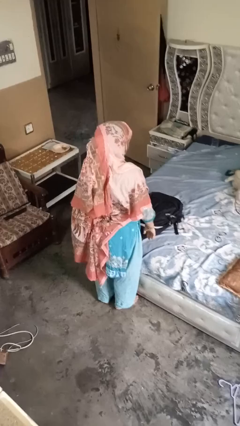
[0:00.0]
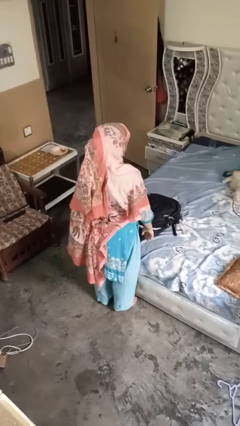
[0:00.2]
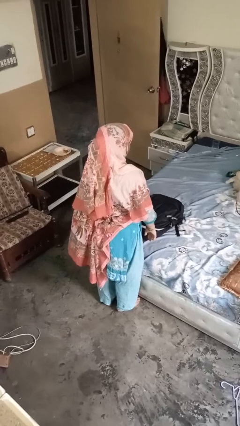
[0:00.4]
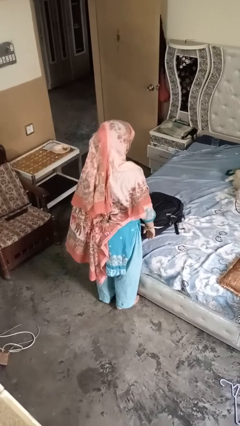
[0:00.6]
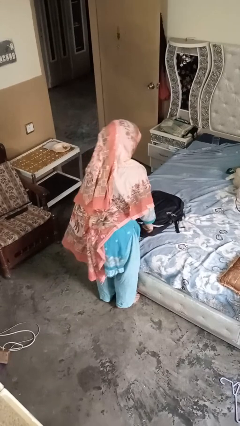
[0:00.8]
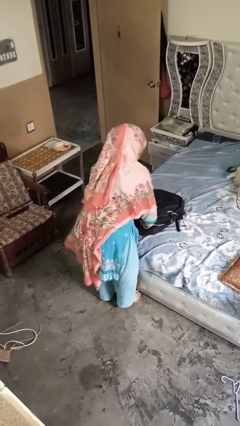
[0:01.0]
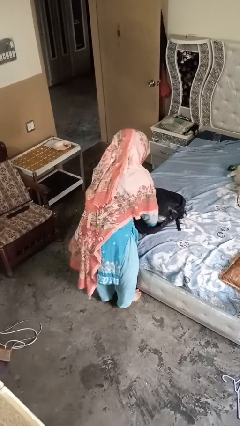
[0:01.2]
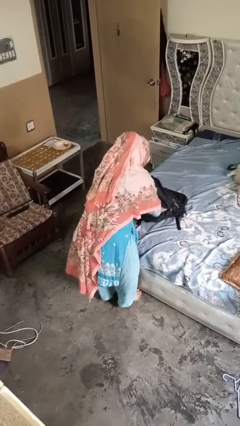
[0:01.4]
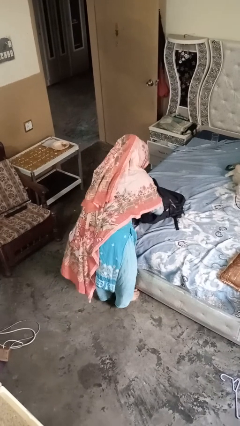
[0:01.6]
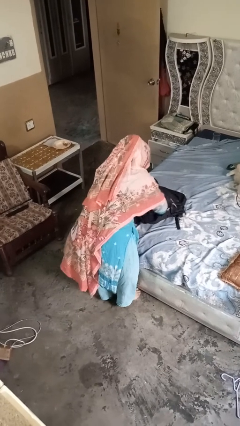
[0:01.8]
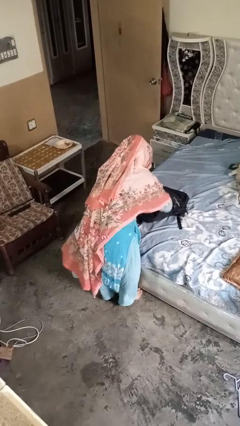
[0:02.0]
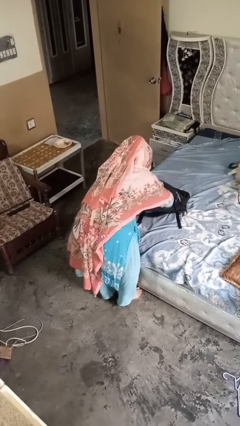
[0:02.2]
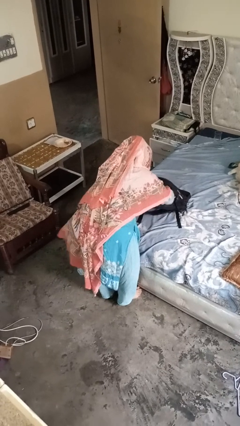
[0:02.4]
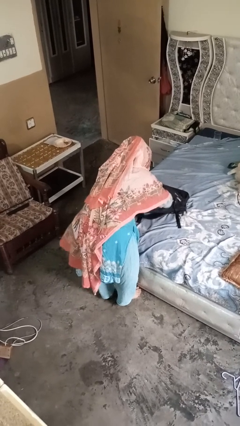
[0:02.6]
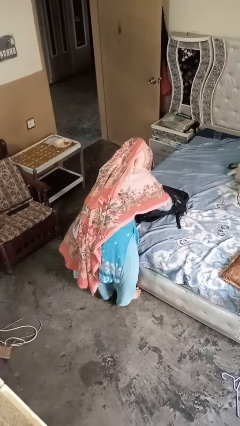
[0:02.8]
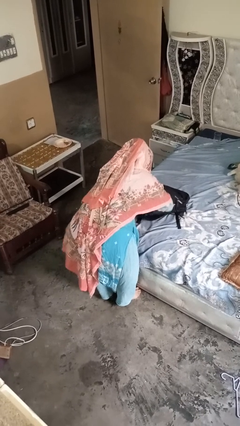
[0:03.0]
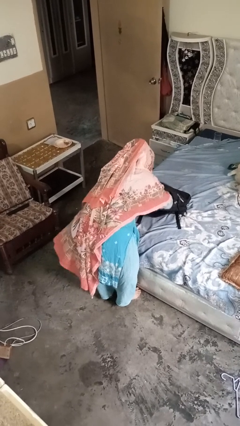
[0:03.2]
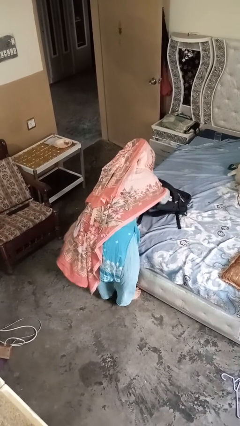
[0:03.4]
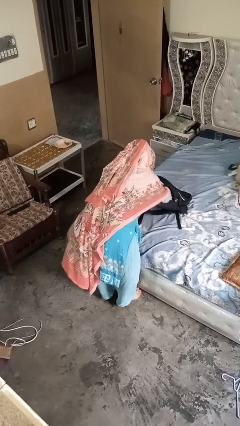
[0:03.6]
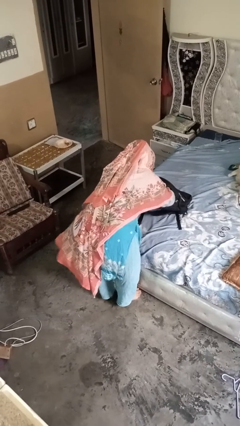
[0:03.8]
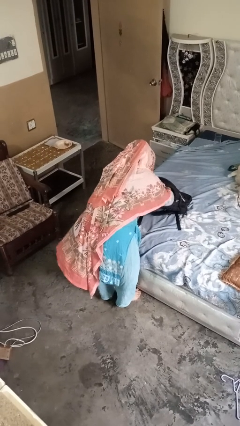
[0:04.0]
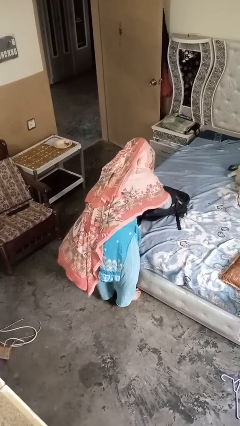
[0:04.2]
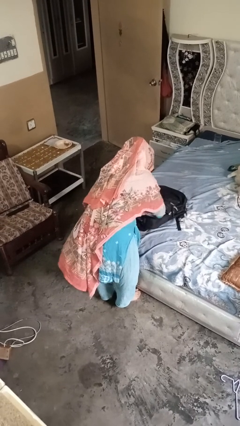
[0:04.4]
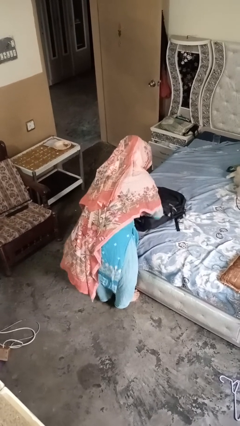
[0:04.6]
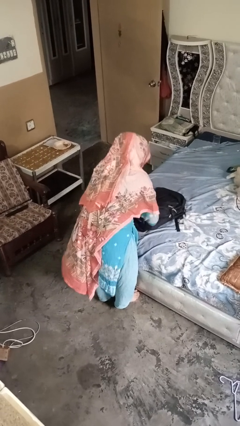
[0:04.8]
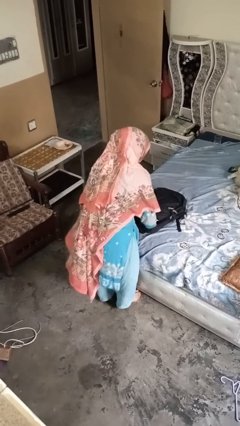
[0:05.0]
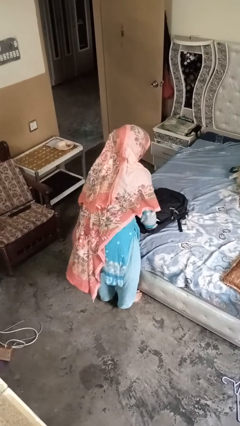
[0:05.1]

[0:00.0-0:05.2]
person searches in bag

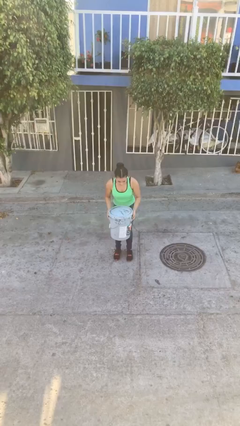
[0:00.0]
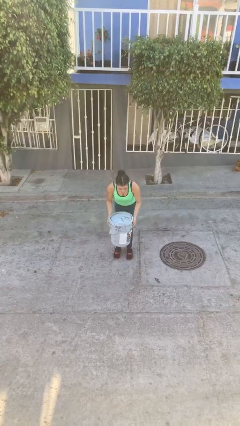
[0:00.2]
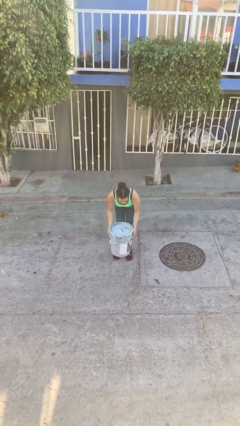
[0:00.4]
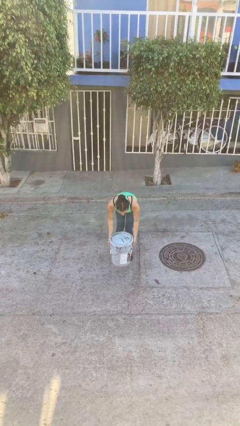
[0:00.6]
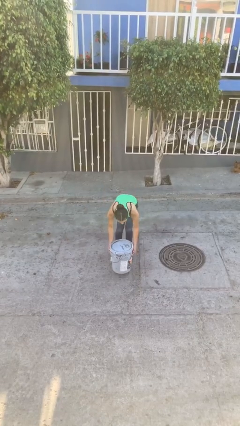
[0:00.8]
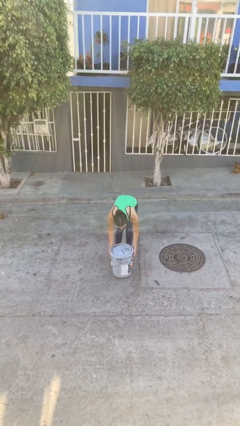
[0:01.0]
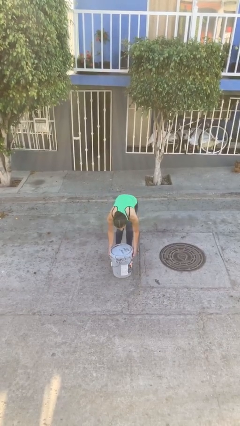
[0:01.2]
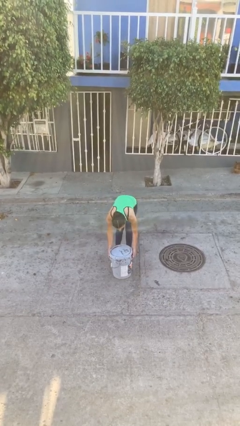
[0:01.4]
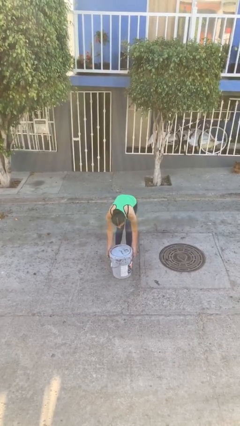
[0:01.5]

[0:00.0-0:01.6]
person puts down object on floor

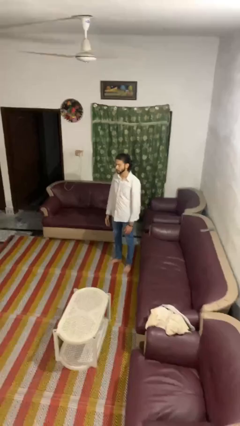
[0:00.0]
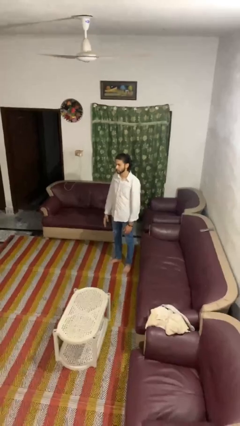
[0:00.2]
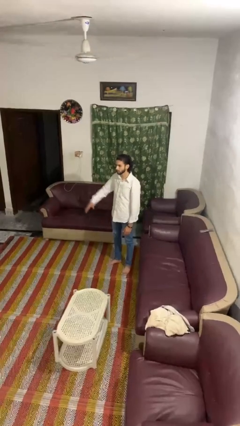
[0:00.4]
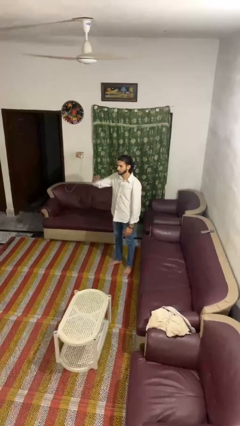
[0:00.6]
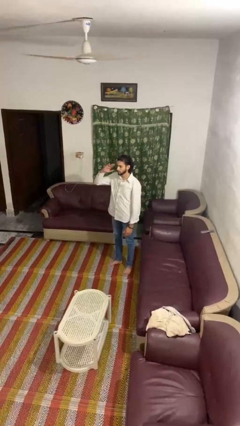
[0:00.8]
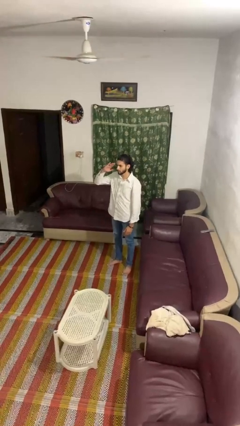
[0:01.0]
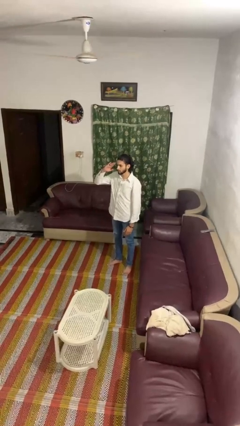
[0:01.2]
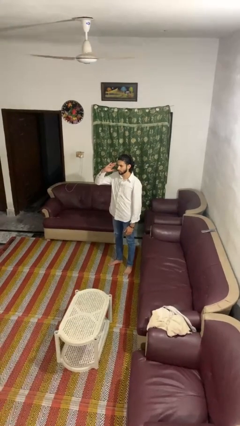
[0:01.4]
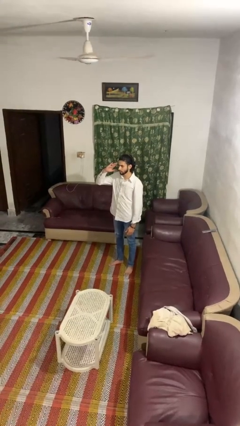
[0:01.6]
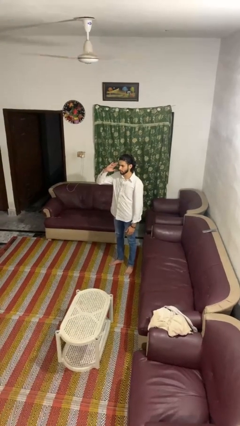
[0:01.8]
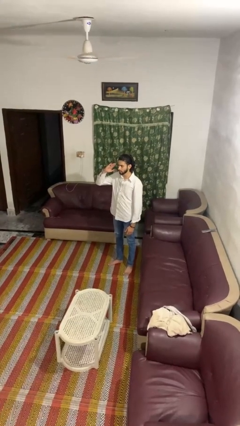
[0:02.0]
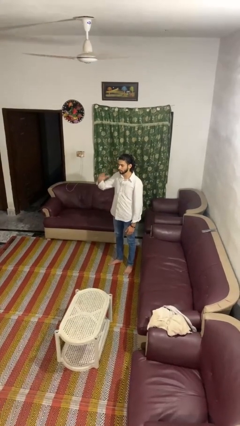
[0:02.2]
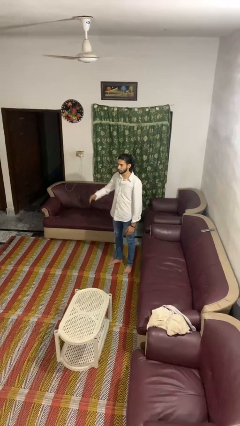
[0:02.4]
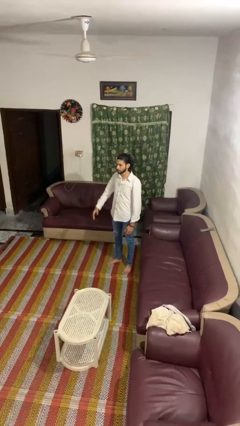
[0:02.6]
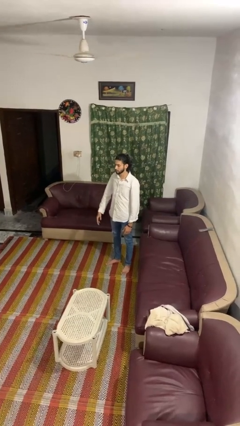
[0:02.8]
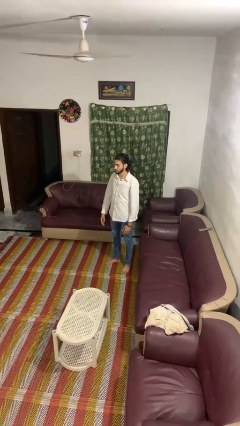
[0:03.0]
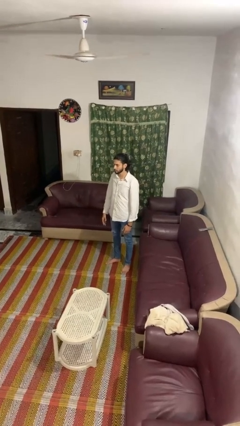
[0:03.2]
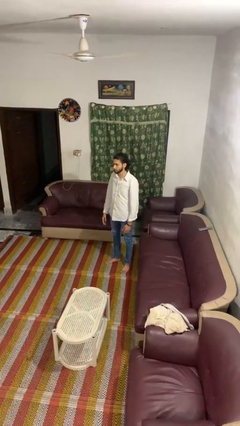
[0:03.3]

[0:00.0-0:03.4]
person salutes

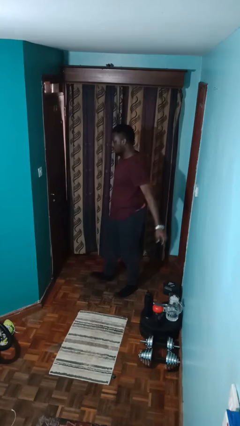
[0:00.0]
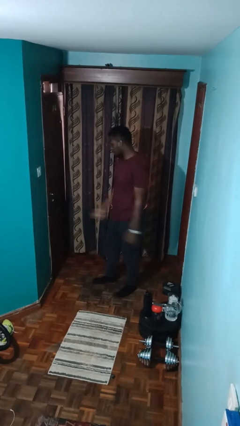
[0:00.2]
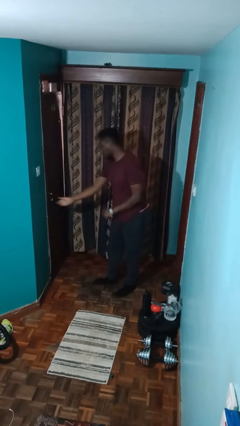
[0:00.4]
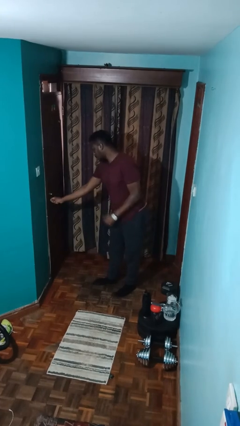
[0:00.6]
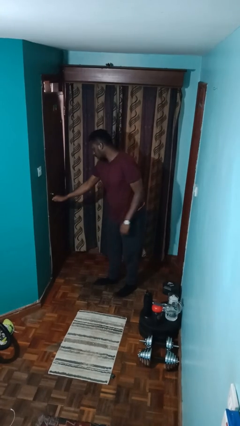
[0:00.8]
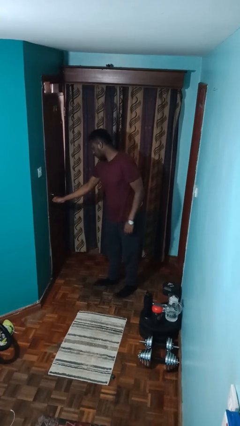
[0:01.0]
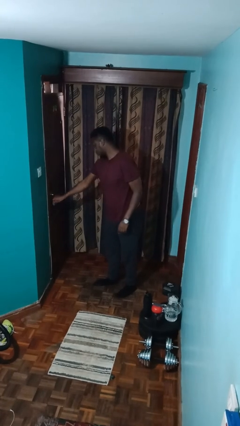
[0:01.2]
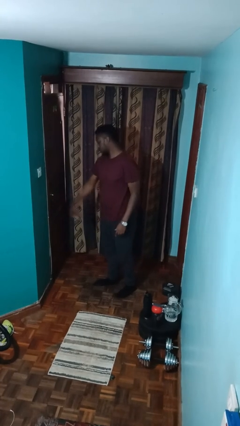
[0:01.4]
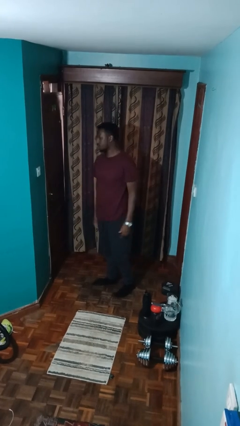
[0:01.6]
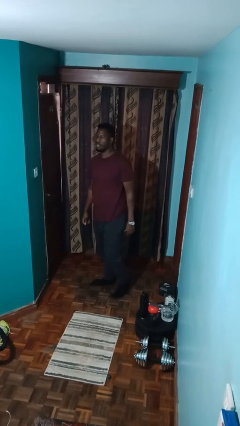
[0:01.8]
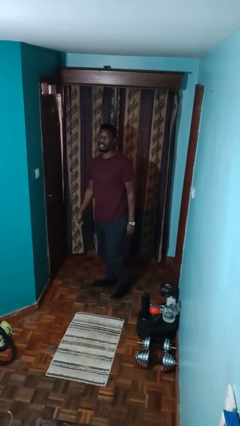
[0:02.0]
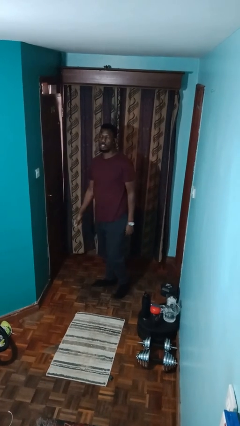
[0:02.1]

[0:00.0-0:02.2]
person locks door with keys

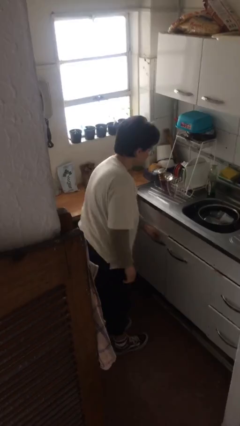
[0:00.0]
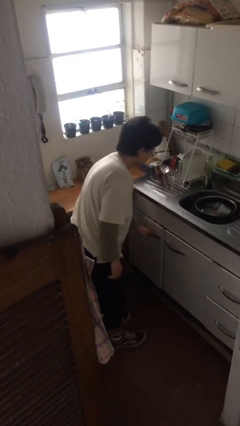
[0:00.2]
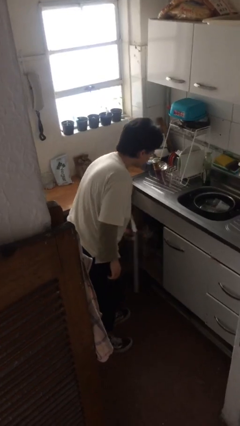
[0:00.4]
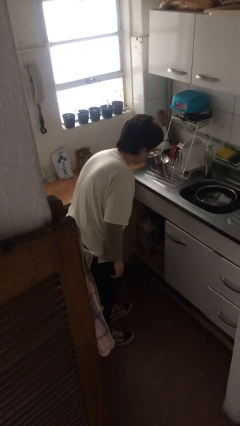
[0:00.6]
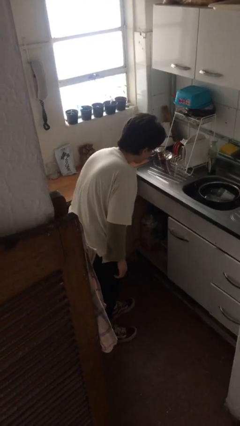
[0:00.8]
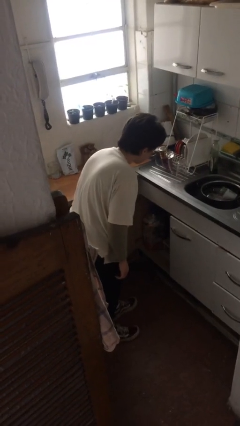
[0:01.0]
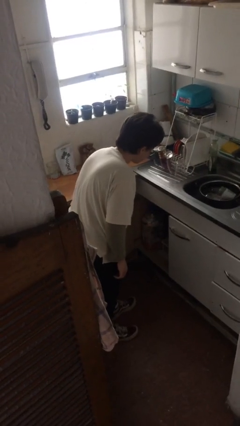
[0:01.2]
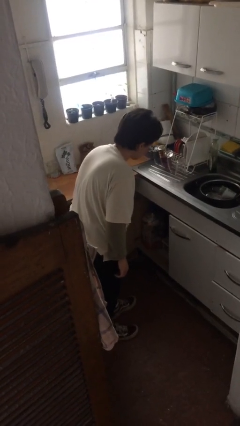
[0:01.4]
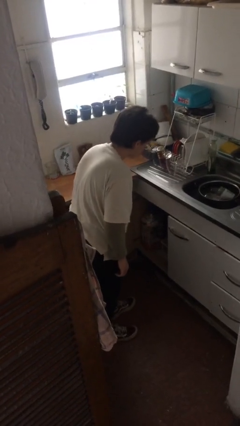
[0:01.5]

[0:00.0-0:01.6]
person opens cabinet

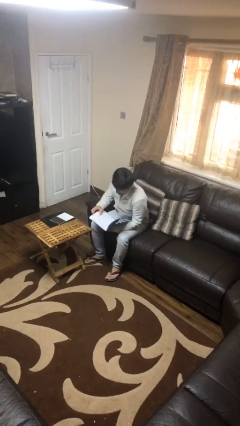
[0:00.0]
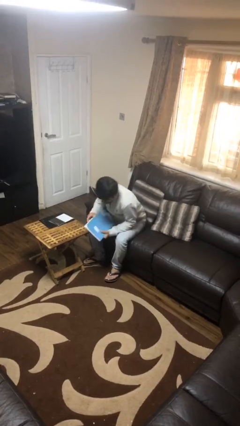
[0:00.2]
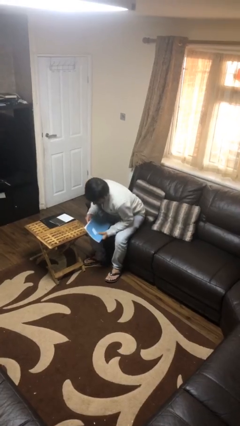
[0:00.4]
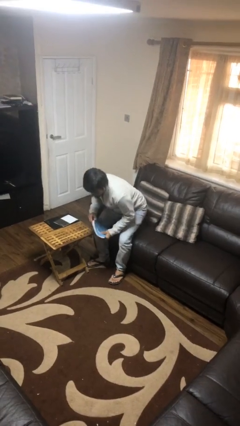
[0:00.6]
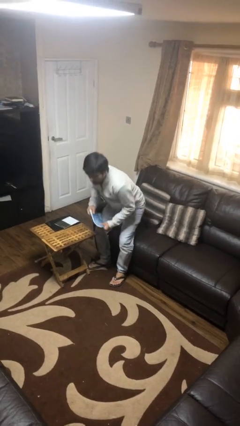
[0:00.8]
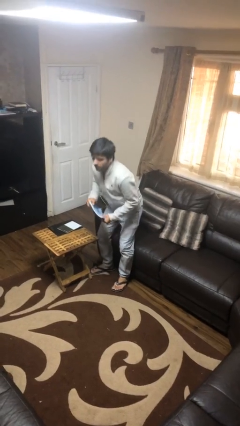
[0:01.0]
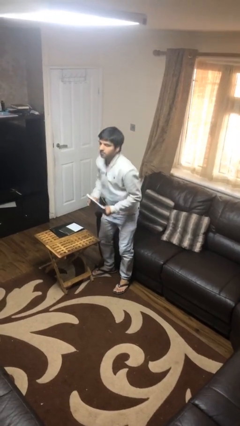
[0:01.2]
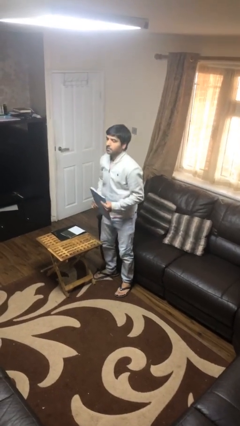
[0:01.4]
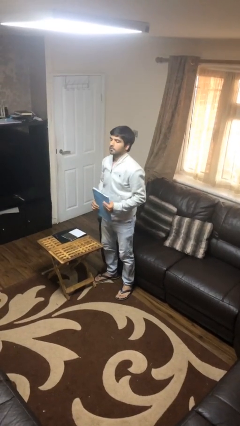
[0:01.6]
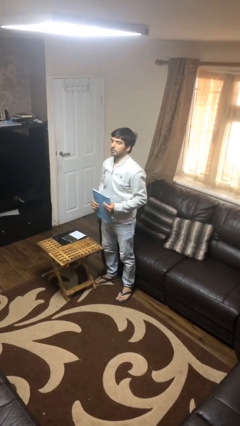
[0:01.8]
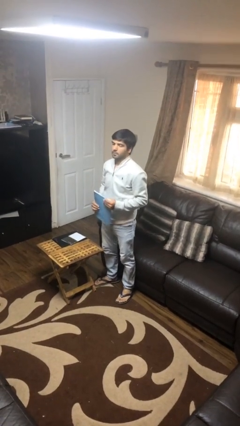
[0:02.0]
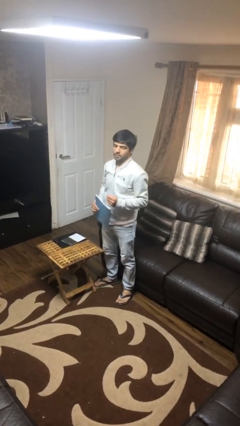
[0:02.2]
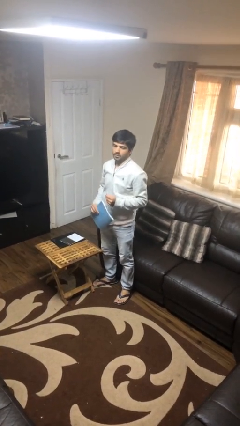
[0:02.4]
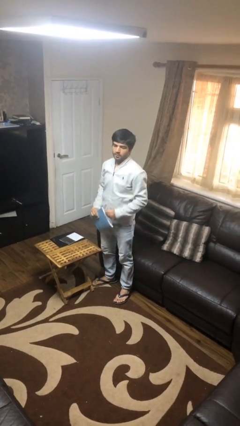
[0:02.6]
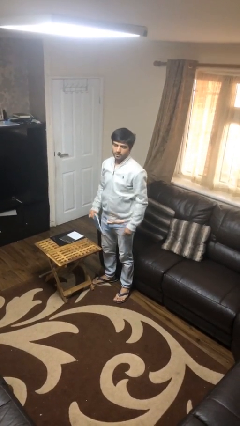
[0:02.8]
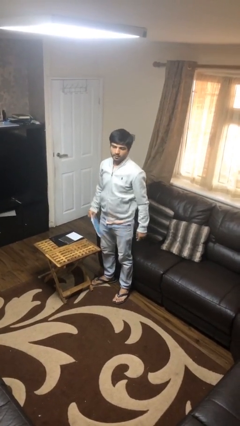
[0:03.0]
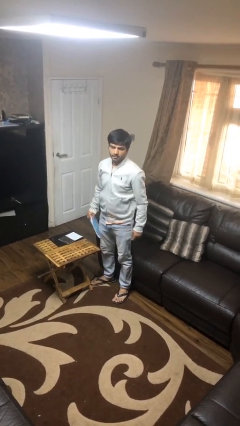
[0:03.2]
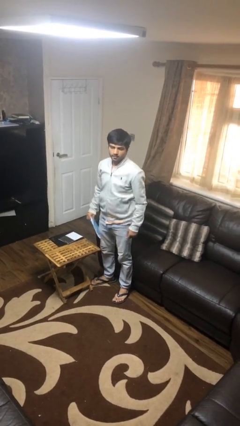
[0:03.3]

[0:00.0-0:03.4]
person stands up
